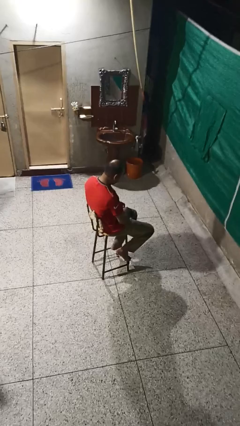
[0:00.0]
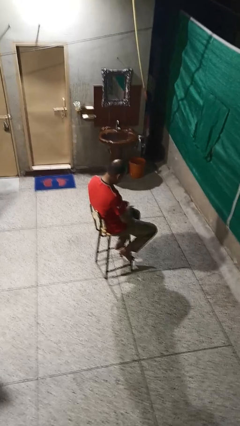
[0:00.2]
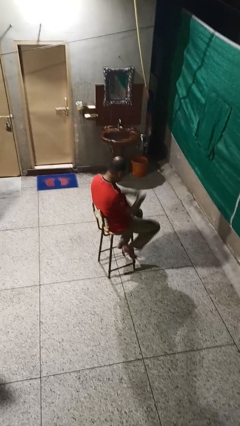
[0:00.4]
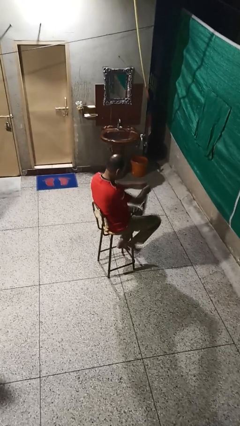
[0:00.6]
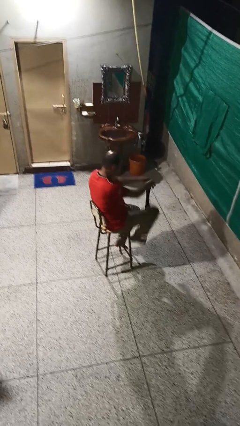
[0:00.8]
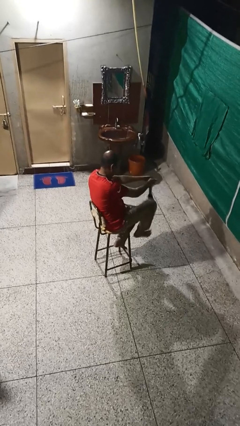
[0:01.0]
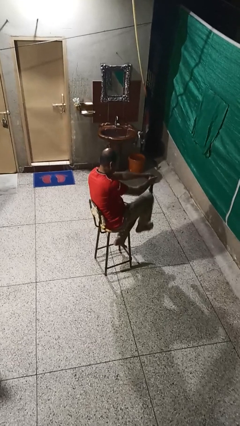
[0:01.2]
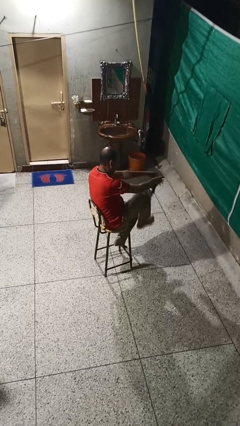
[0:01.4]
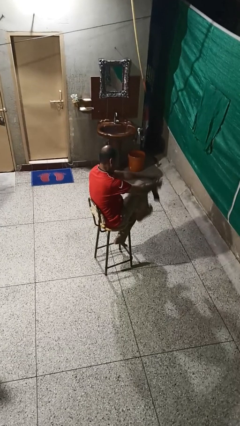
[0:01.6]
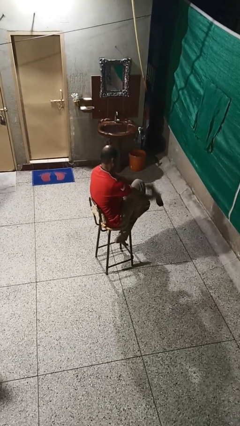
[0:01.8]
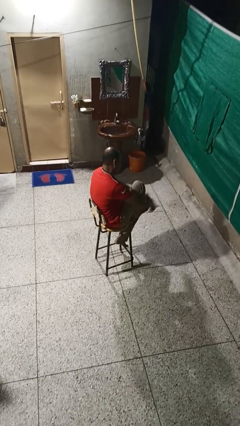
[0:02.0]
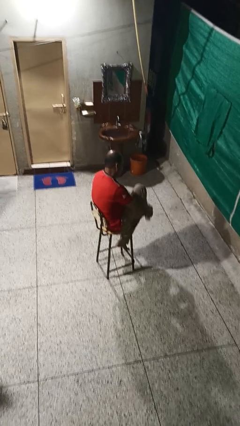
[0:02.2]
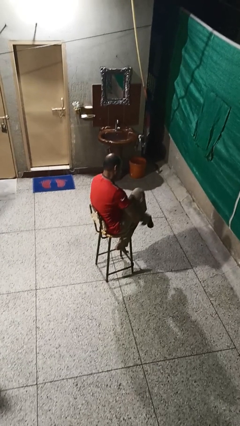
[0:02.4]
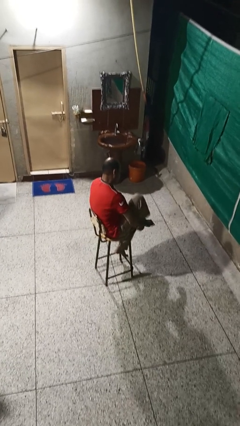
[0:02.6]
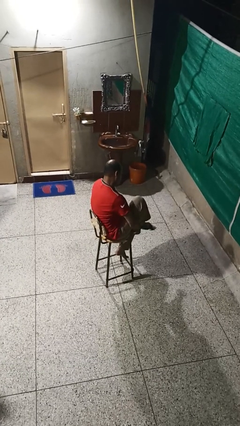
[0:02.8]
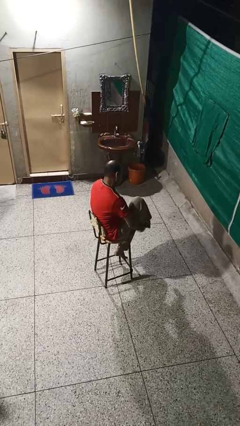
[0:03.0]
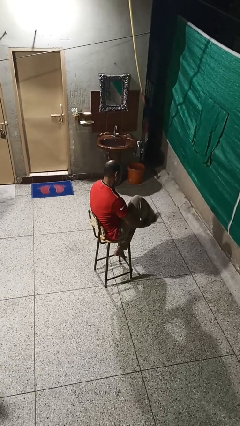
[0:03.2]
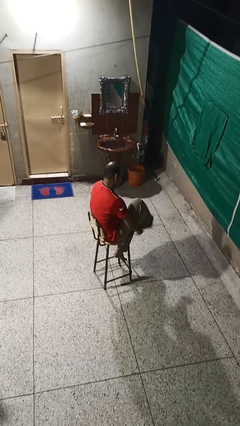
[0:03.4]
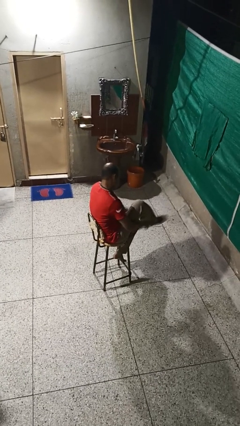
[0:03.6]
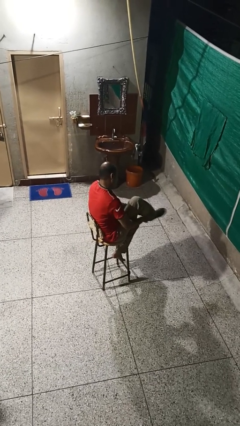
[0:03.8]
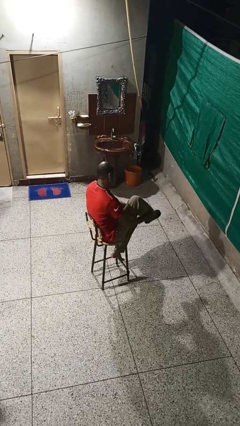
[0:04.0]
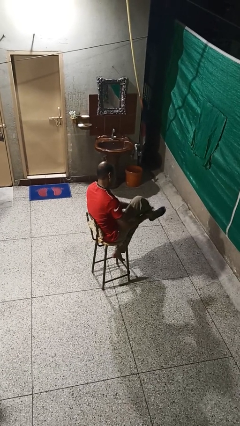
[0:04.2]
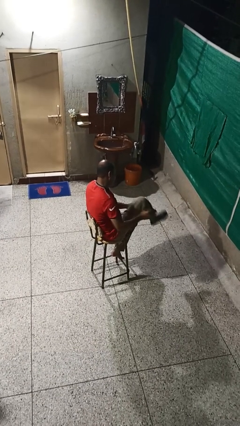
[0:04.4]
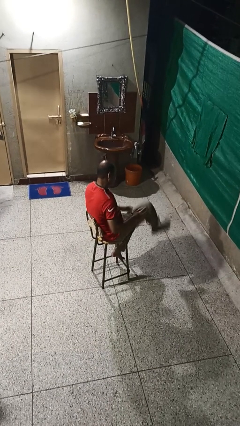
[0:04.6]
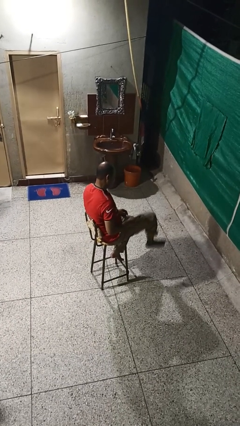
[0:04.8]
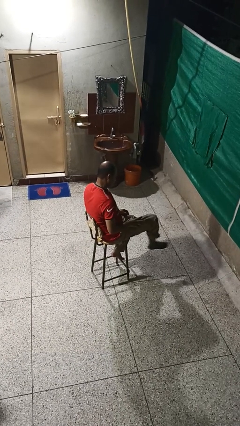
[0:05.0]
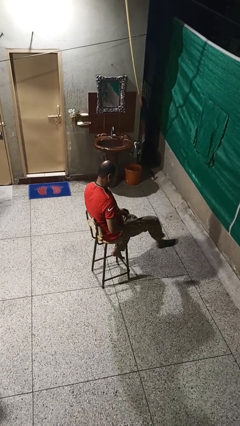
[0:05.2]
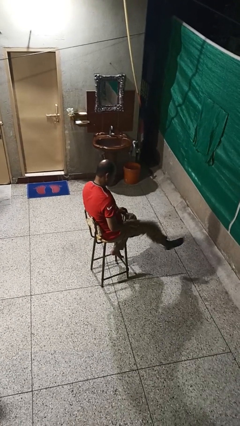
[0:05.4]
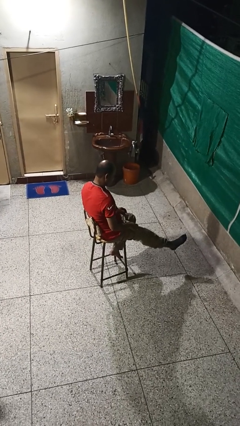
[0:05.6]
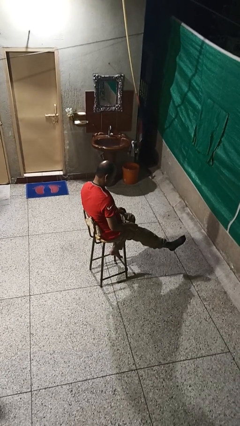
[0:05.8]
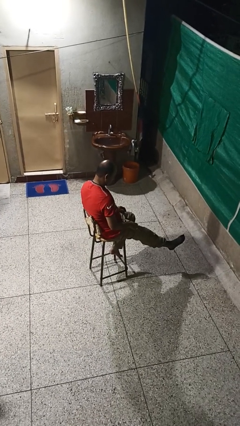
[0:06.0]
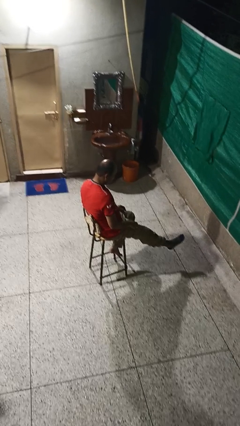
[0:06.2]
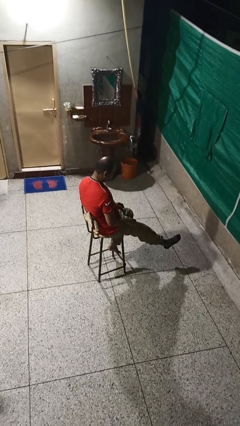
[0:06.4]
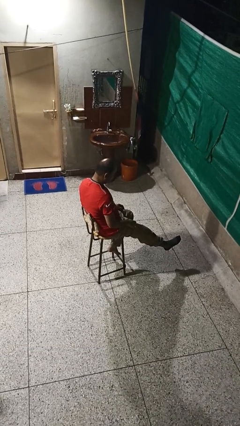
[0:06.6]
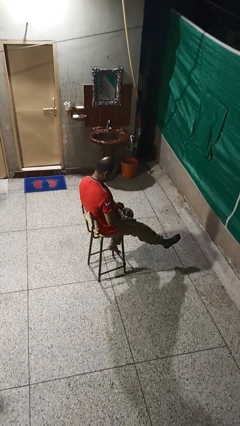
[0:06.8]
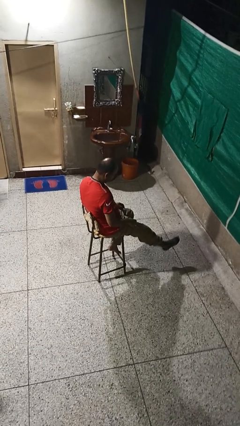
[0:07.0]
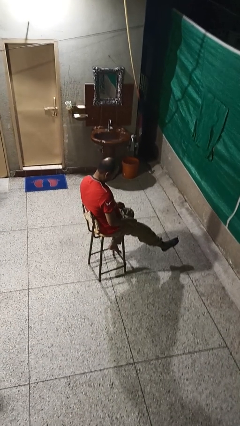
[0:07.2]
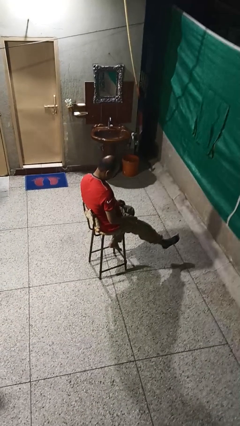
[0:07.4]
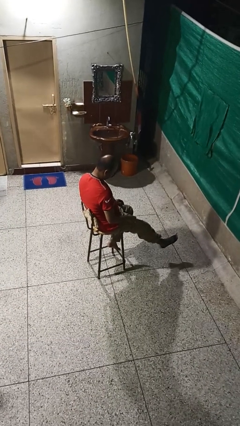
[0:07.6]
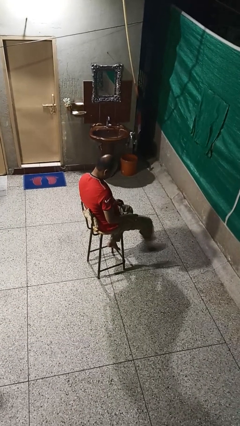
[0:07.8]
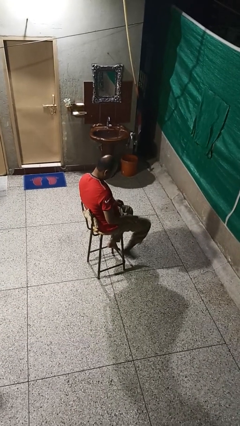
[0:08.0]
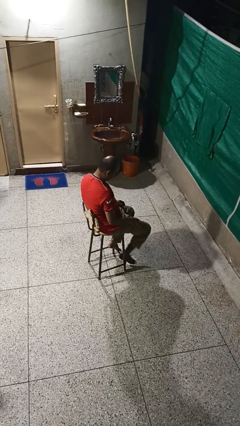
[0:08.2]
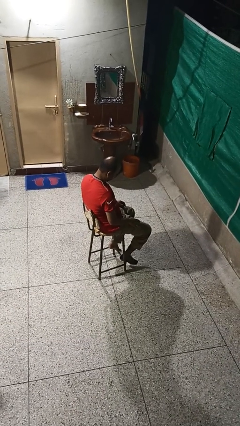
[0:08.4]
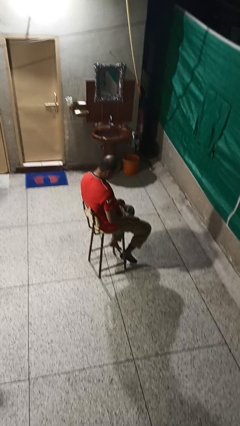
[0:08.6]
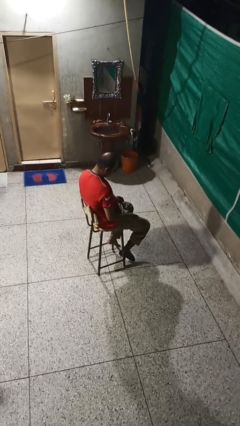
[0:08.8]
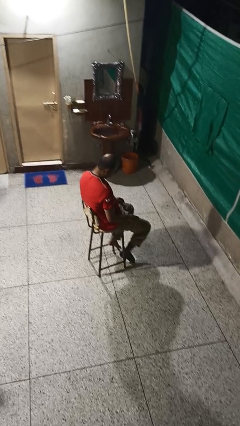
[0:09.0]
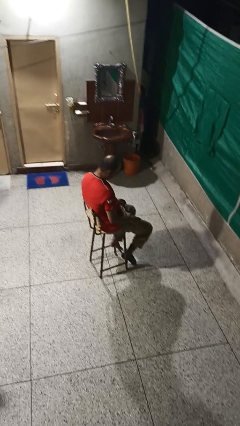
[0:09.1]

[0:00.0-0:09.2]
person puts on socks

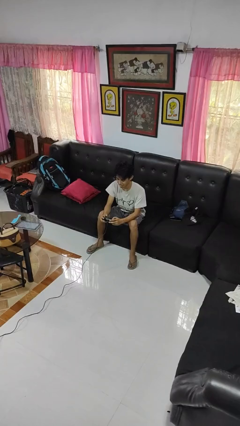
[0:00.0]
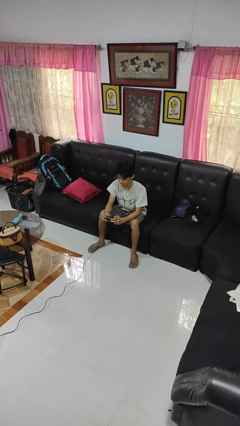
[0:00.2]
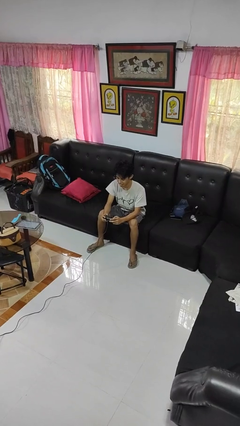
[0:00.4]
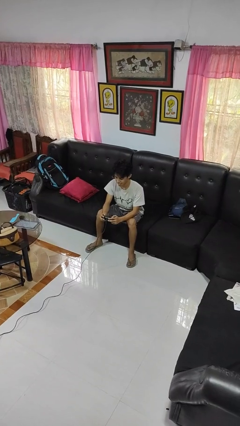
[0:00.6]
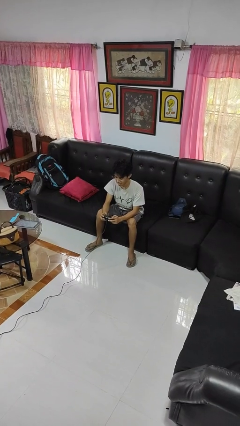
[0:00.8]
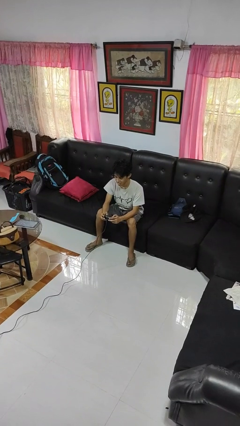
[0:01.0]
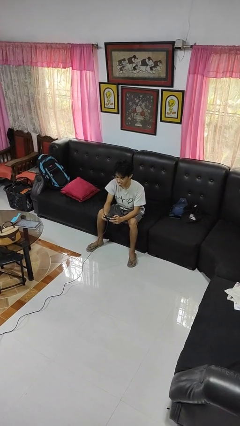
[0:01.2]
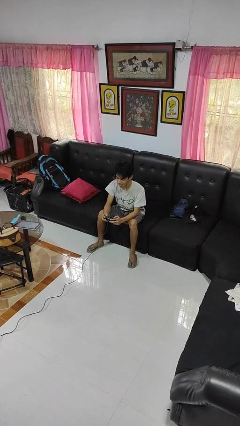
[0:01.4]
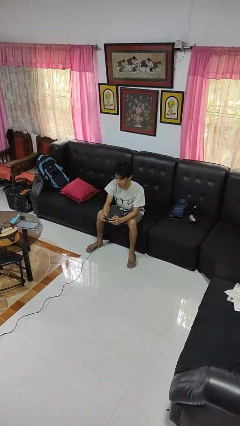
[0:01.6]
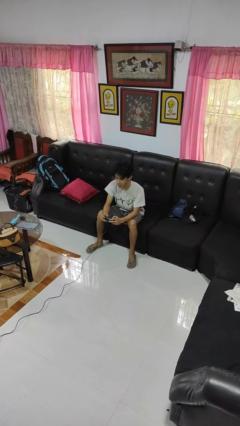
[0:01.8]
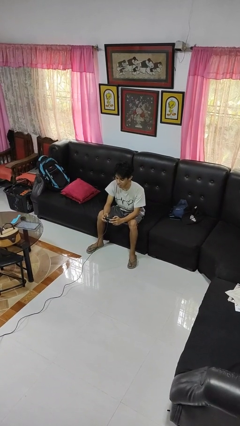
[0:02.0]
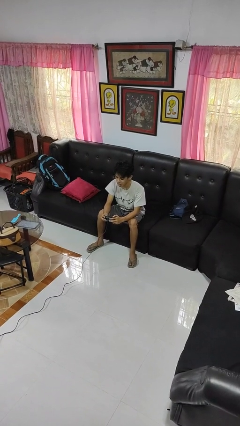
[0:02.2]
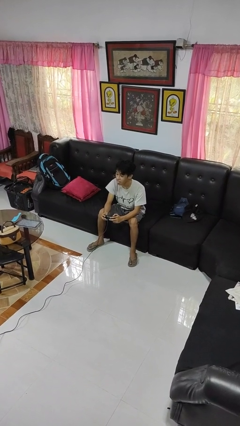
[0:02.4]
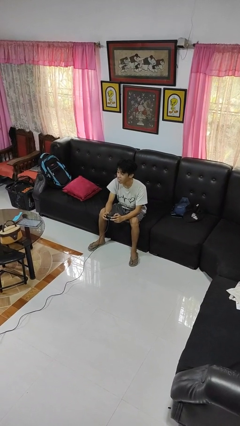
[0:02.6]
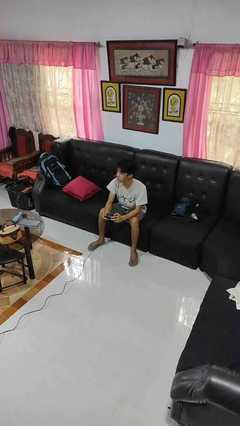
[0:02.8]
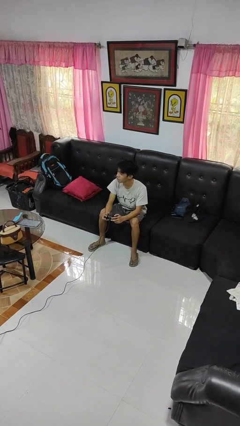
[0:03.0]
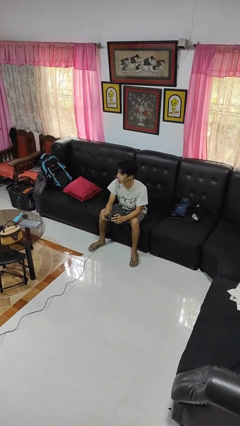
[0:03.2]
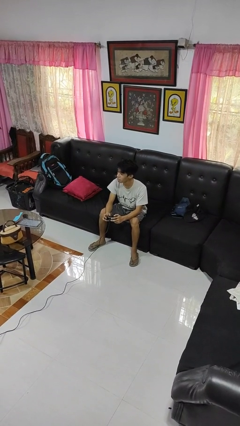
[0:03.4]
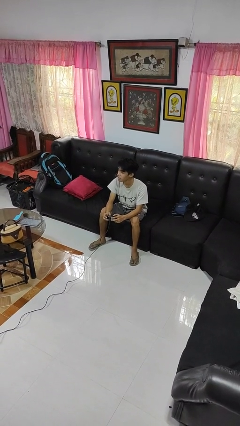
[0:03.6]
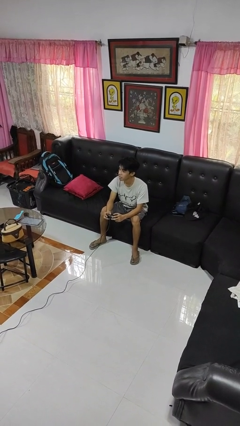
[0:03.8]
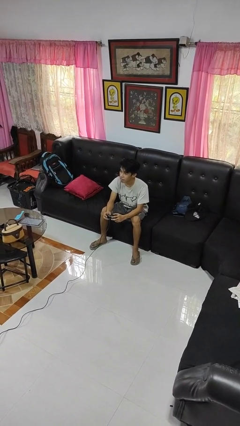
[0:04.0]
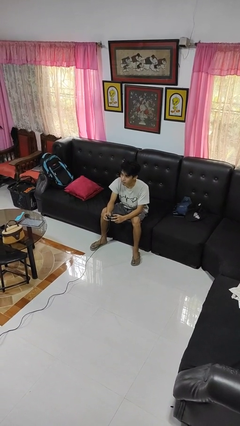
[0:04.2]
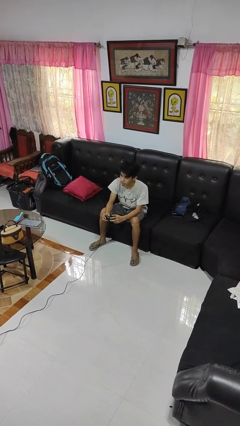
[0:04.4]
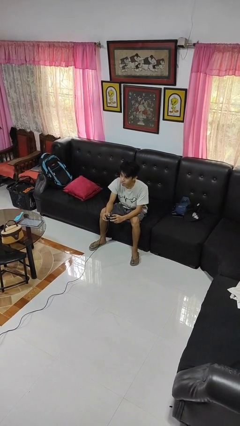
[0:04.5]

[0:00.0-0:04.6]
person interacts with handheld game

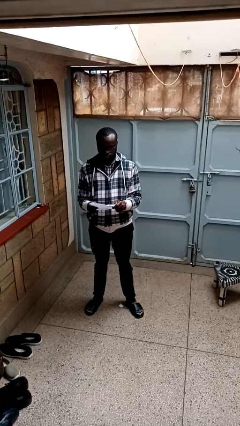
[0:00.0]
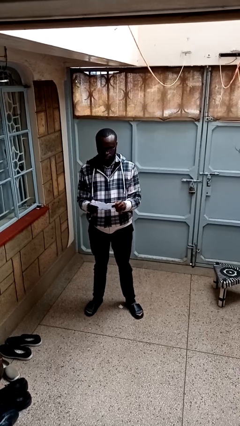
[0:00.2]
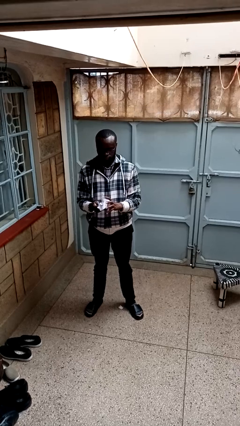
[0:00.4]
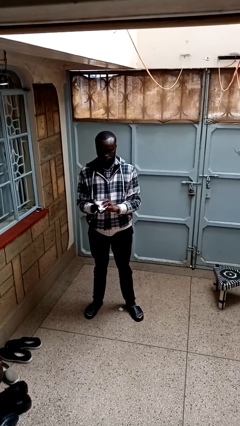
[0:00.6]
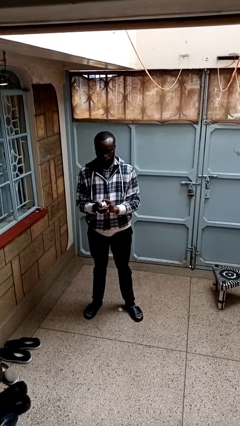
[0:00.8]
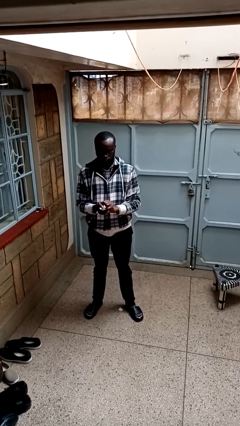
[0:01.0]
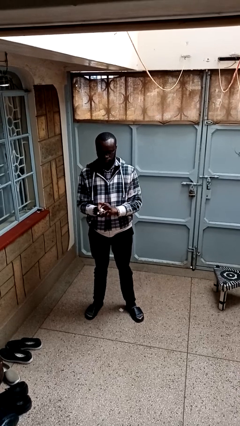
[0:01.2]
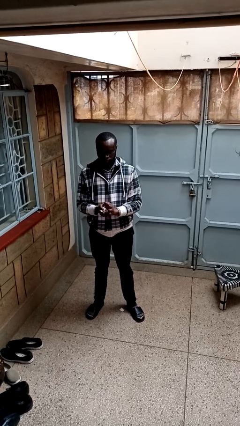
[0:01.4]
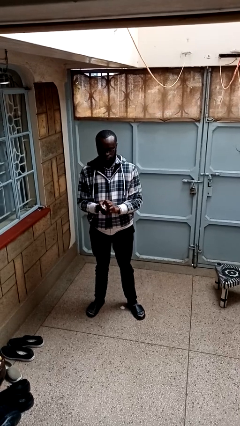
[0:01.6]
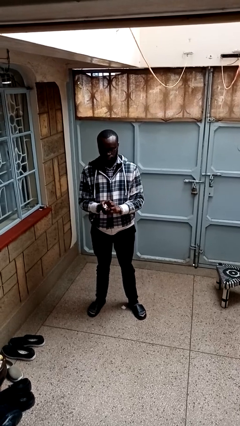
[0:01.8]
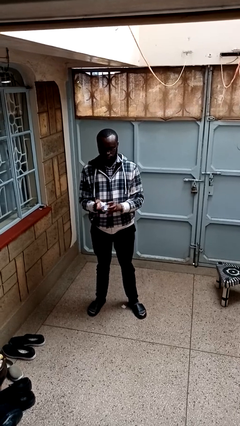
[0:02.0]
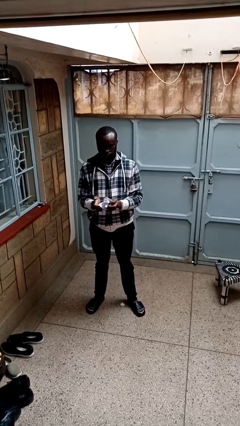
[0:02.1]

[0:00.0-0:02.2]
person crumples paper

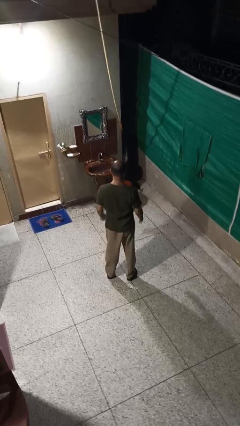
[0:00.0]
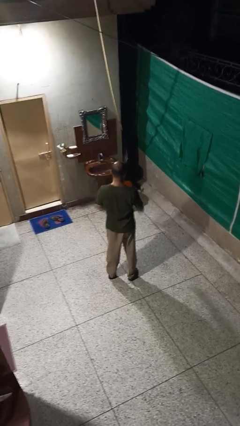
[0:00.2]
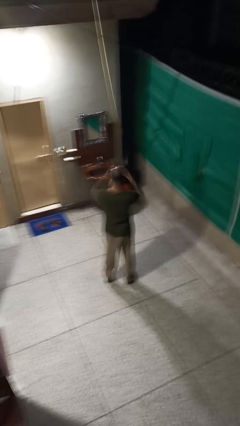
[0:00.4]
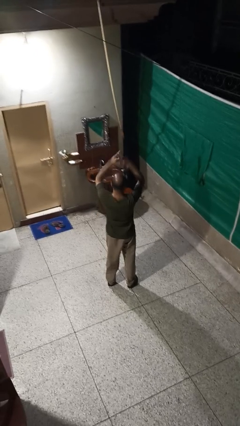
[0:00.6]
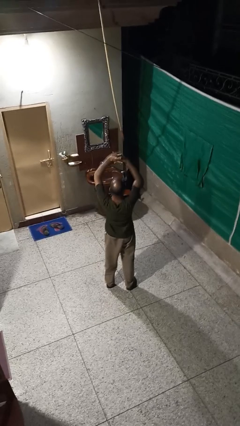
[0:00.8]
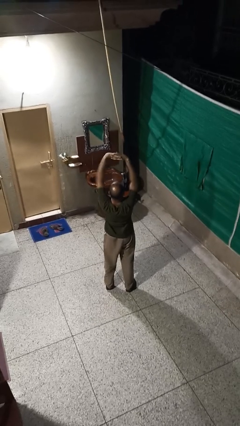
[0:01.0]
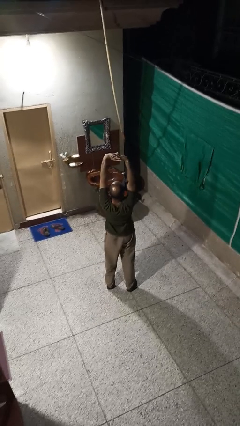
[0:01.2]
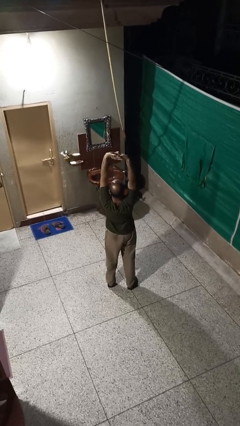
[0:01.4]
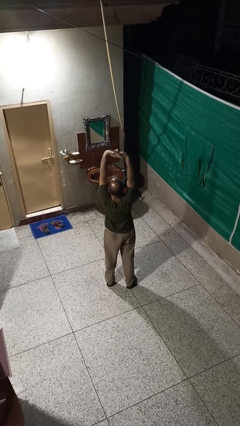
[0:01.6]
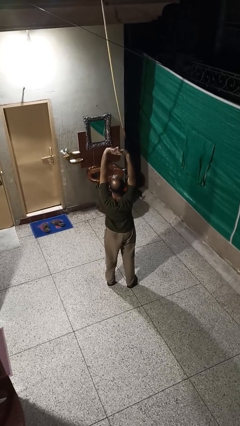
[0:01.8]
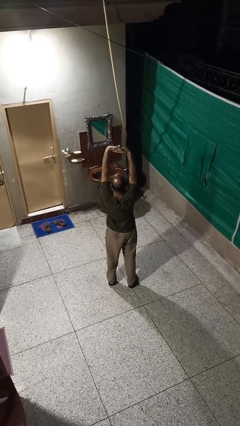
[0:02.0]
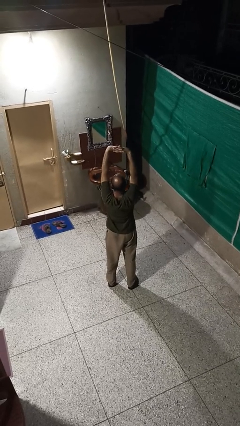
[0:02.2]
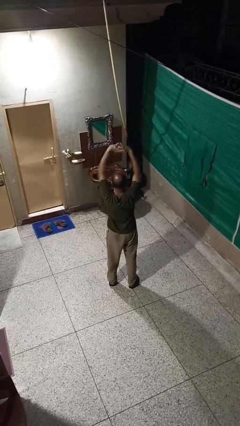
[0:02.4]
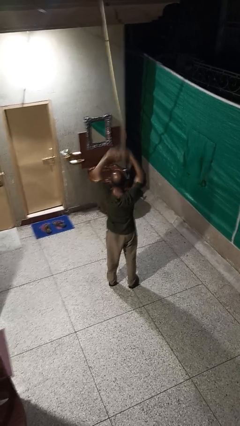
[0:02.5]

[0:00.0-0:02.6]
person stretches arms over head
